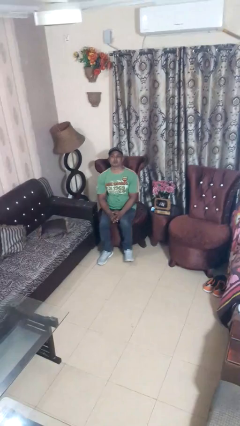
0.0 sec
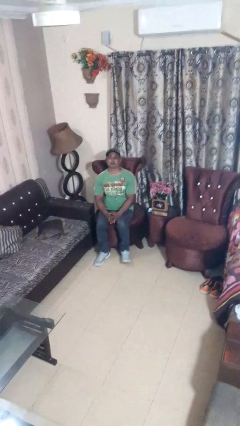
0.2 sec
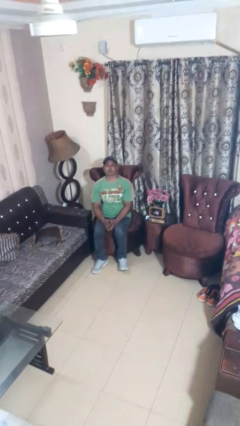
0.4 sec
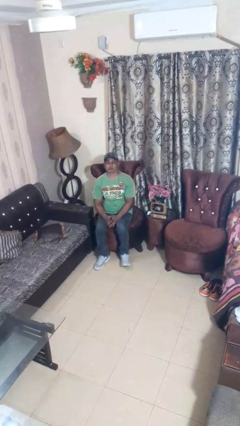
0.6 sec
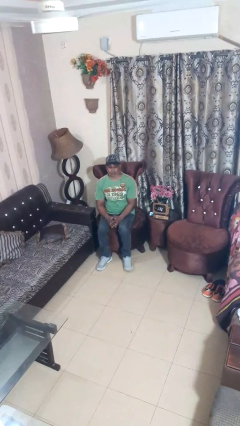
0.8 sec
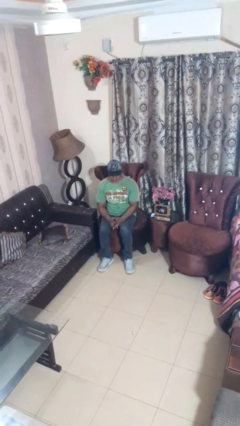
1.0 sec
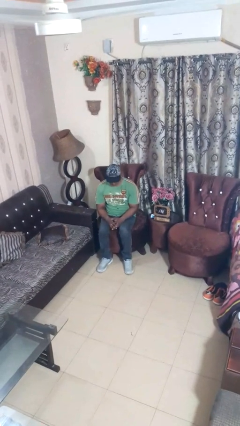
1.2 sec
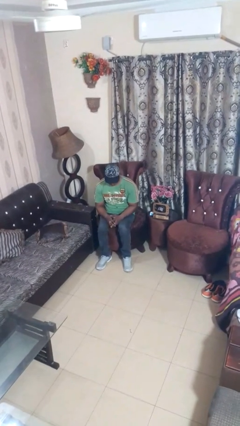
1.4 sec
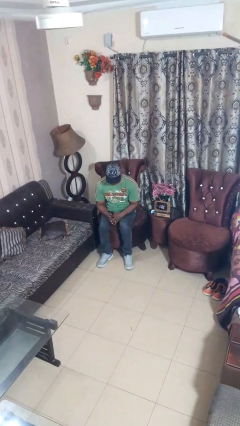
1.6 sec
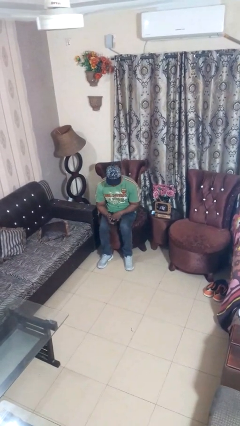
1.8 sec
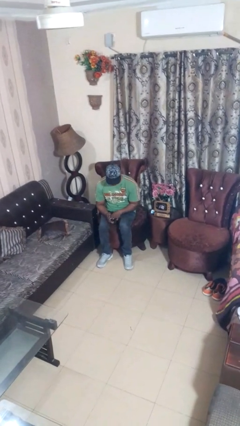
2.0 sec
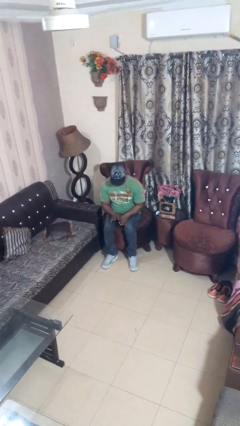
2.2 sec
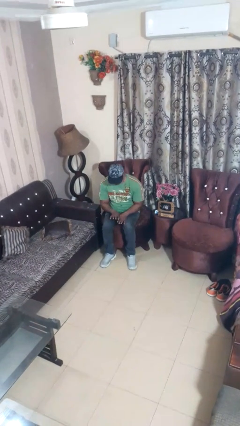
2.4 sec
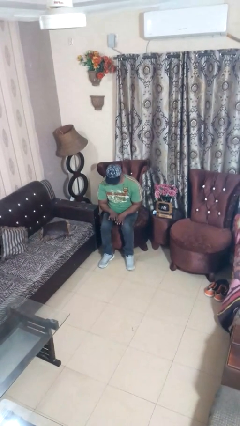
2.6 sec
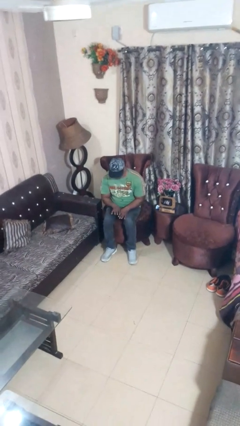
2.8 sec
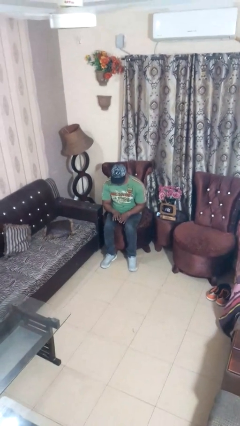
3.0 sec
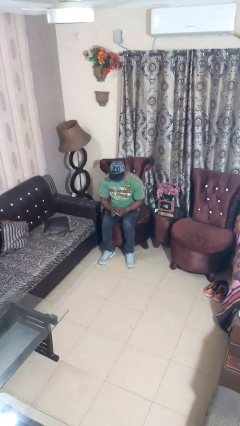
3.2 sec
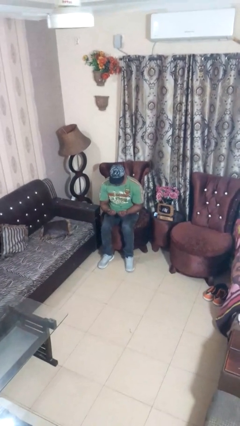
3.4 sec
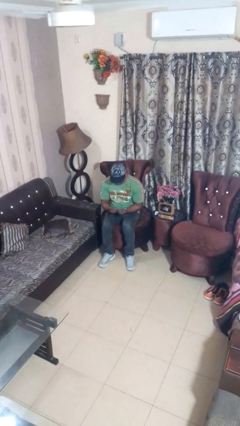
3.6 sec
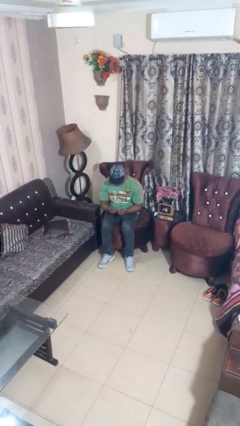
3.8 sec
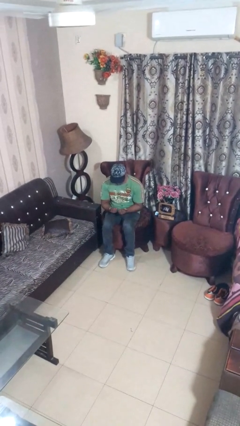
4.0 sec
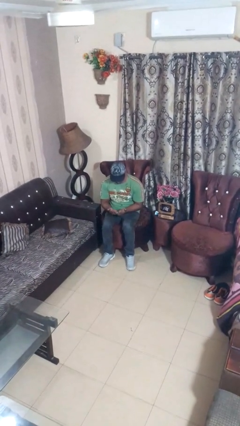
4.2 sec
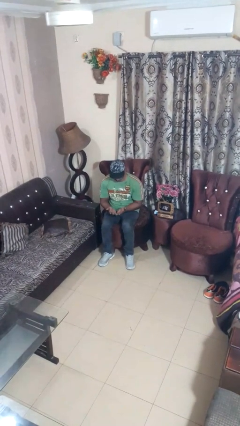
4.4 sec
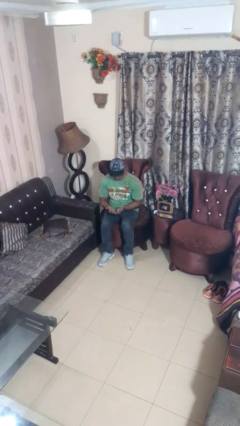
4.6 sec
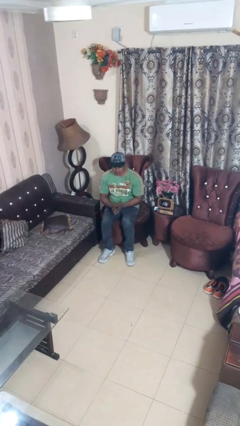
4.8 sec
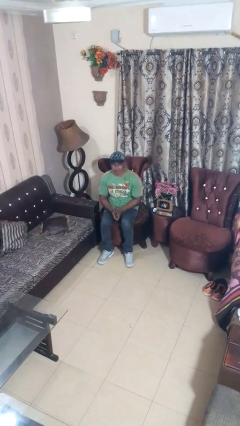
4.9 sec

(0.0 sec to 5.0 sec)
person looks at hands in lap

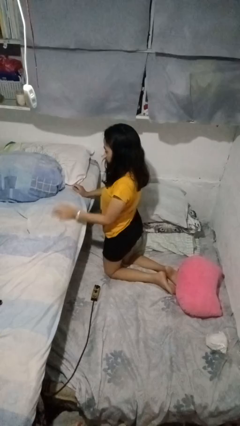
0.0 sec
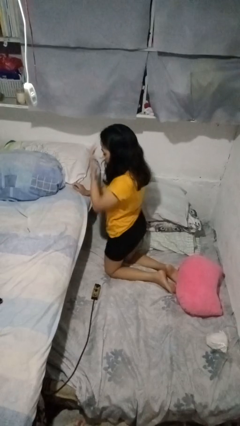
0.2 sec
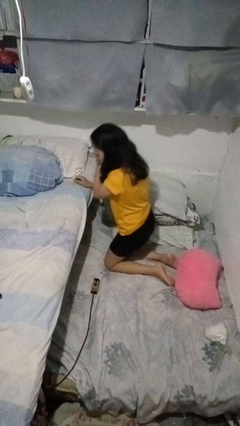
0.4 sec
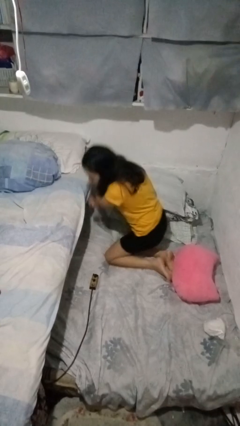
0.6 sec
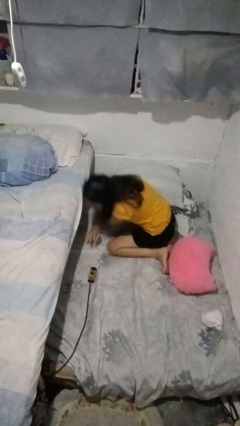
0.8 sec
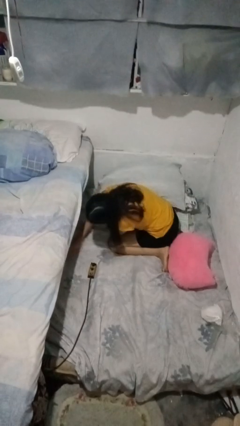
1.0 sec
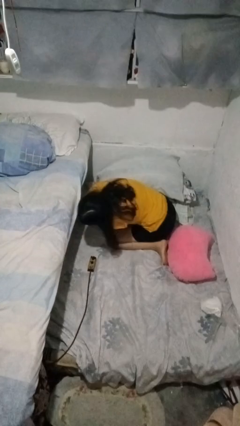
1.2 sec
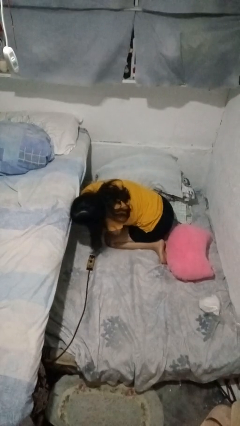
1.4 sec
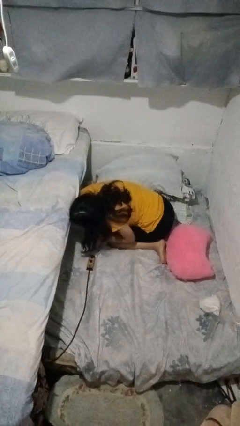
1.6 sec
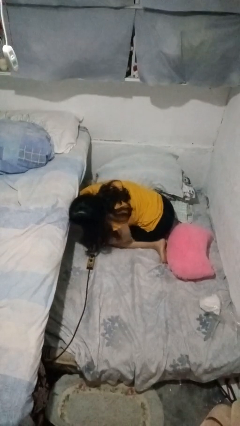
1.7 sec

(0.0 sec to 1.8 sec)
person searches under bed

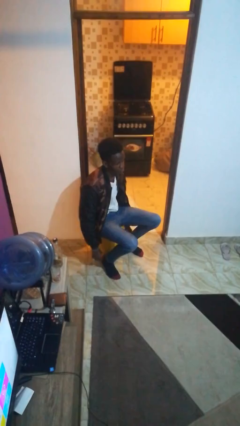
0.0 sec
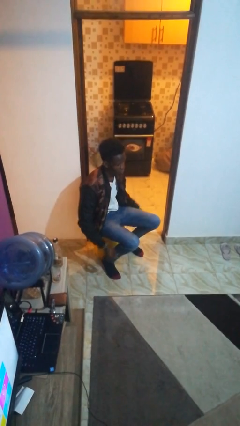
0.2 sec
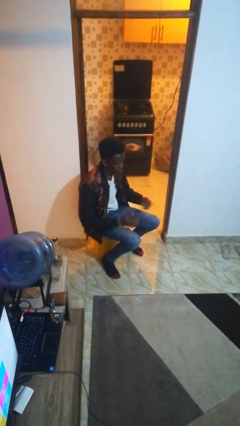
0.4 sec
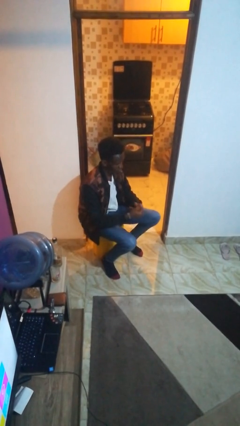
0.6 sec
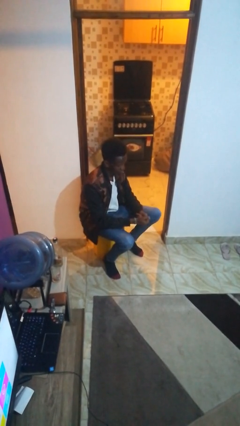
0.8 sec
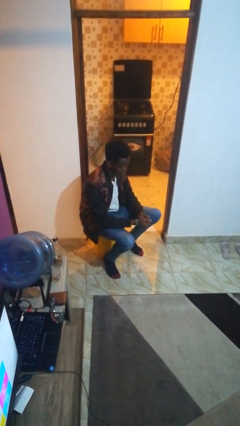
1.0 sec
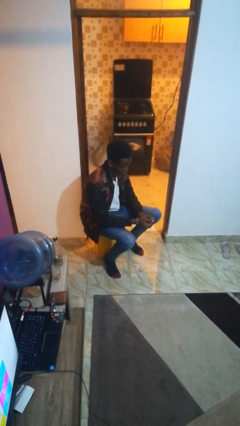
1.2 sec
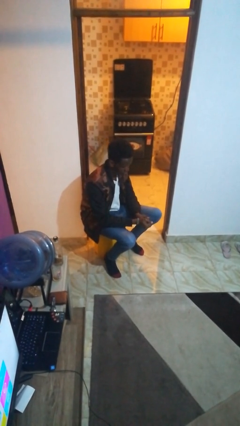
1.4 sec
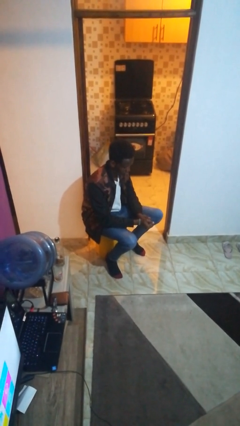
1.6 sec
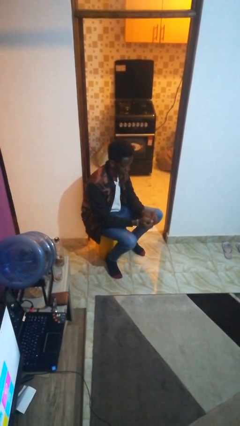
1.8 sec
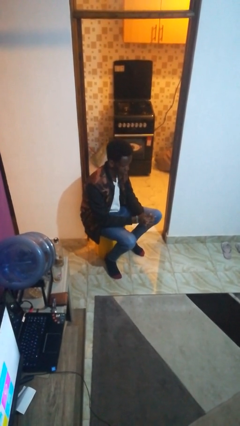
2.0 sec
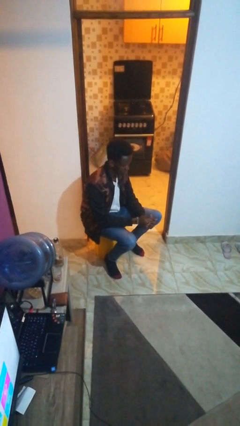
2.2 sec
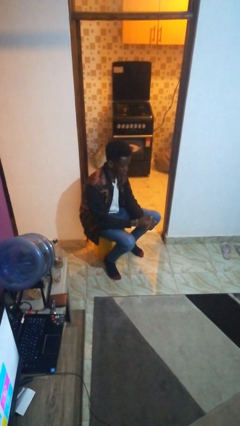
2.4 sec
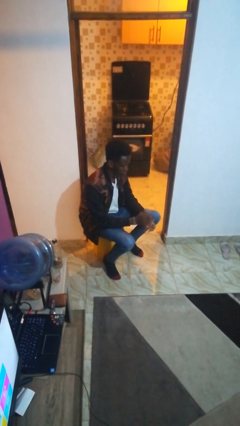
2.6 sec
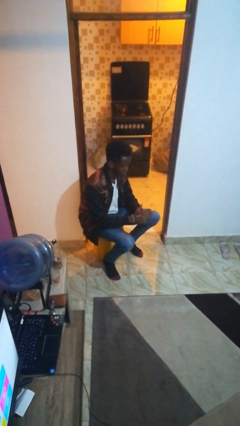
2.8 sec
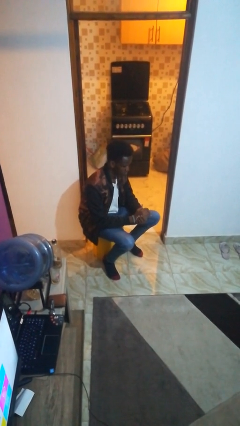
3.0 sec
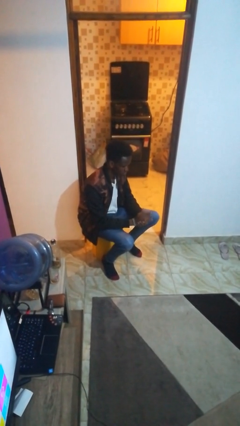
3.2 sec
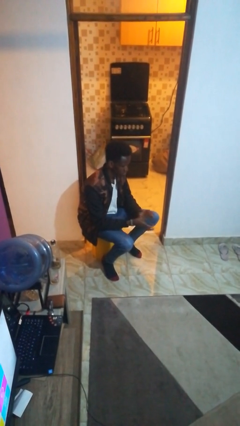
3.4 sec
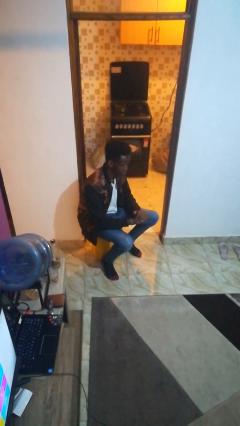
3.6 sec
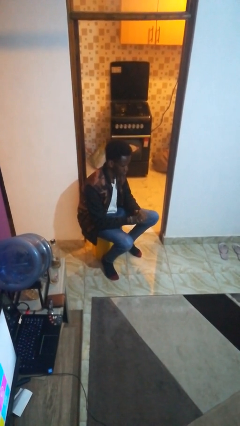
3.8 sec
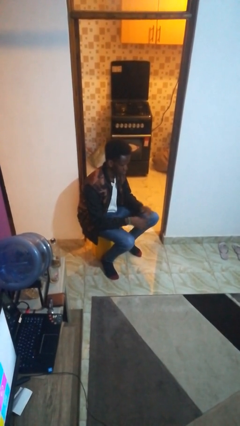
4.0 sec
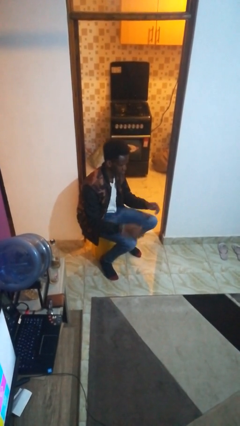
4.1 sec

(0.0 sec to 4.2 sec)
person cracks knuckles

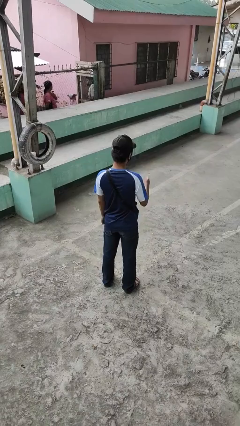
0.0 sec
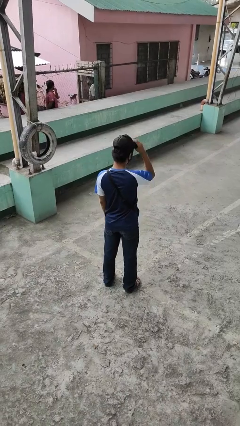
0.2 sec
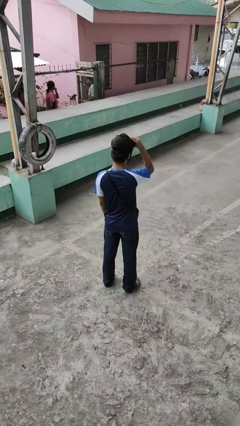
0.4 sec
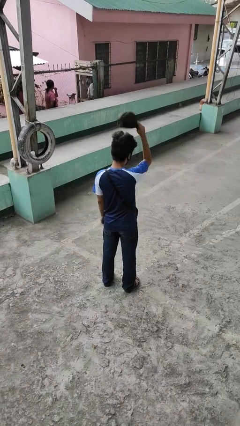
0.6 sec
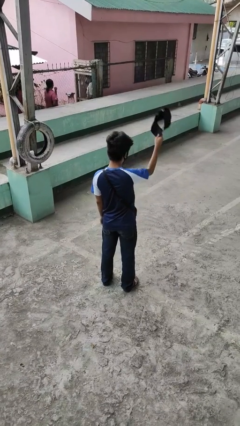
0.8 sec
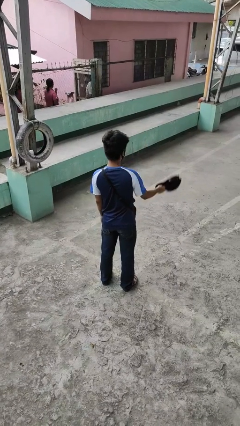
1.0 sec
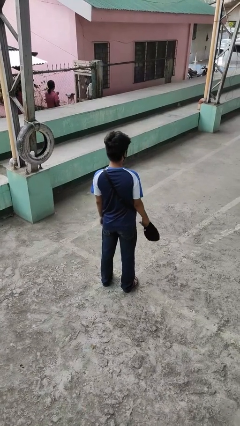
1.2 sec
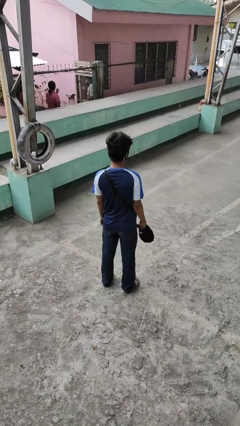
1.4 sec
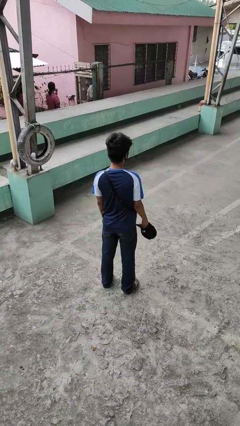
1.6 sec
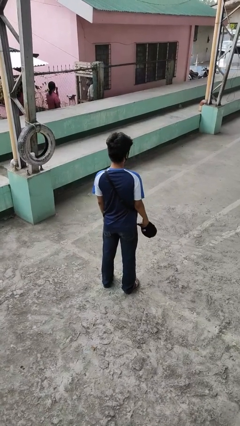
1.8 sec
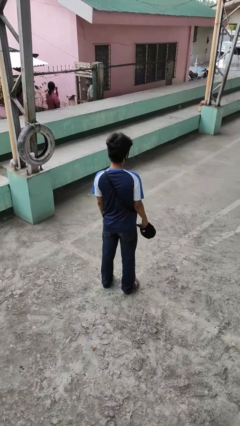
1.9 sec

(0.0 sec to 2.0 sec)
person takes off hat

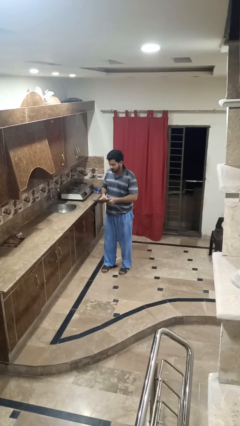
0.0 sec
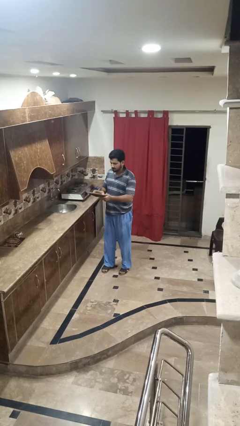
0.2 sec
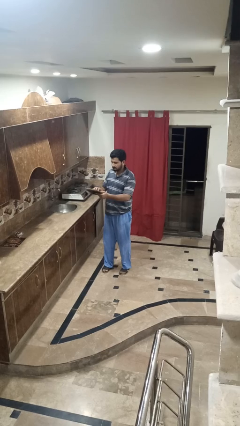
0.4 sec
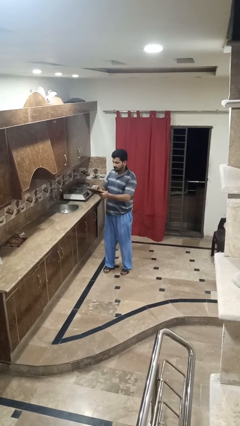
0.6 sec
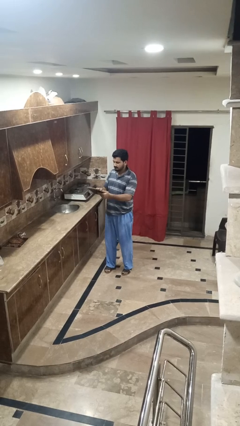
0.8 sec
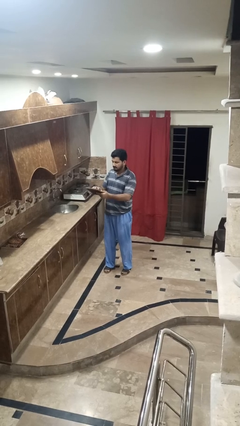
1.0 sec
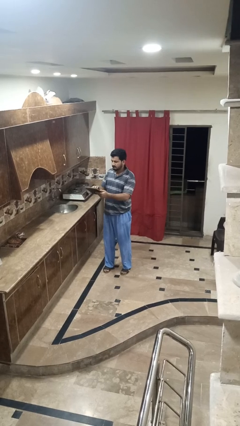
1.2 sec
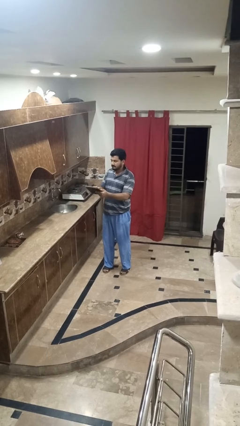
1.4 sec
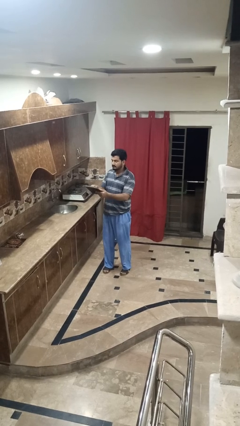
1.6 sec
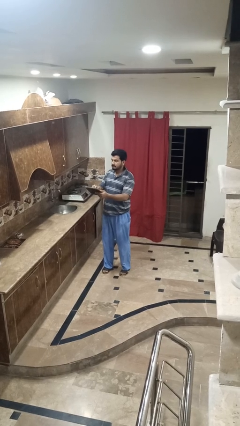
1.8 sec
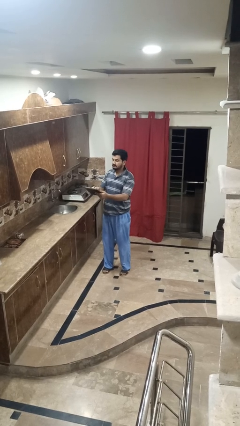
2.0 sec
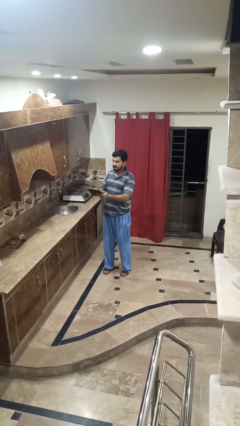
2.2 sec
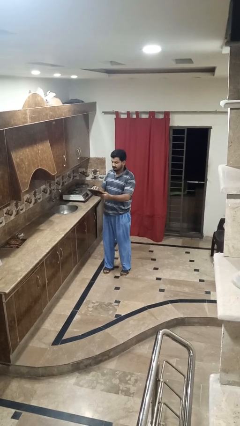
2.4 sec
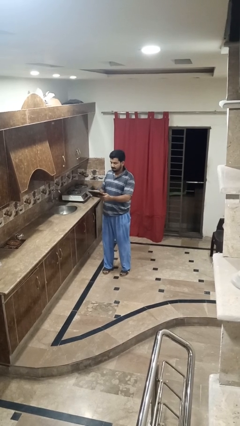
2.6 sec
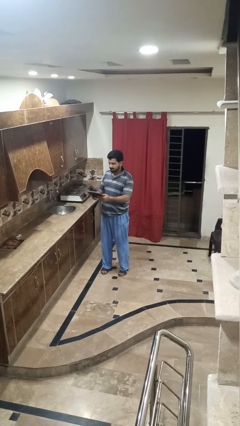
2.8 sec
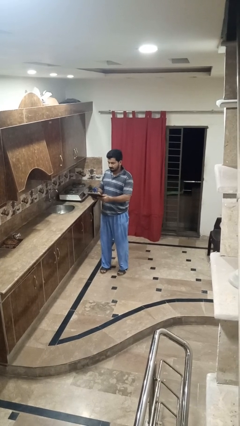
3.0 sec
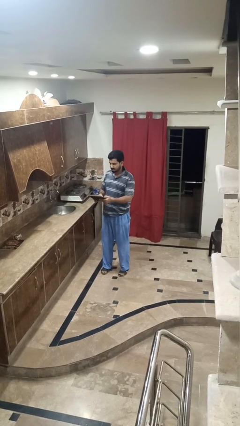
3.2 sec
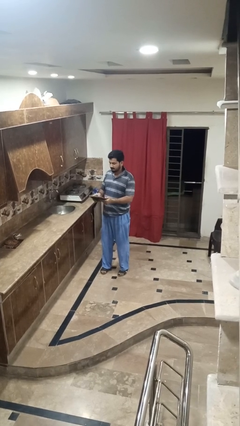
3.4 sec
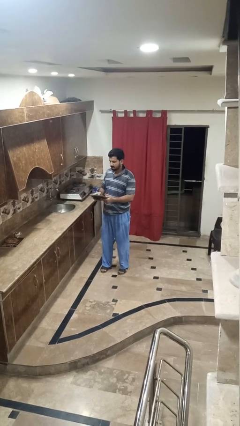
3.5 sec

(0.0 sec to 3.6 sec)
person interacts with tablet

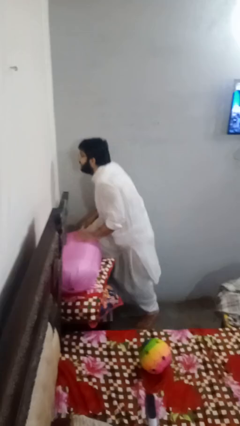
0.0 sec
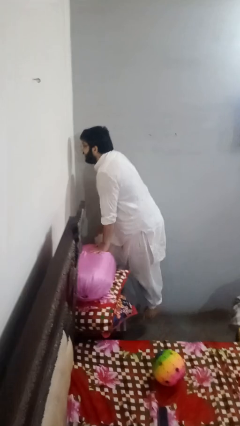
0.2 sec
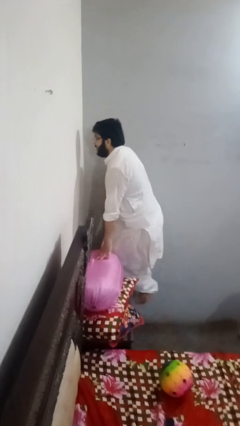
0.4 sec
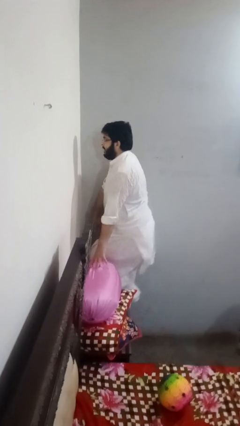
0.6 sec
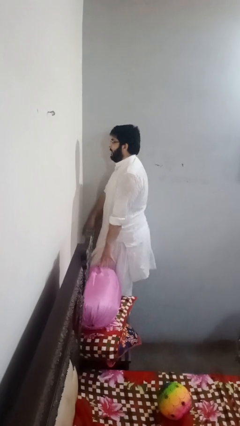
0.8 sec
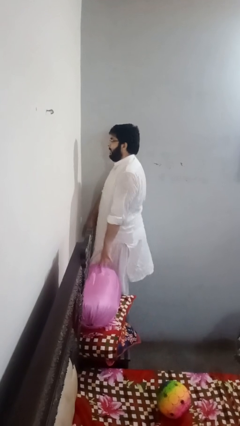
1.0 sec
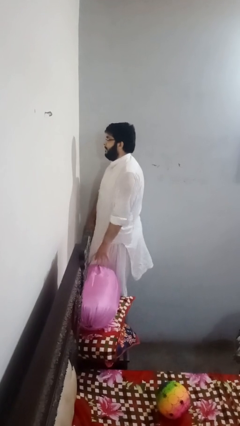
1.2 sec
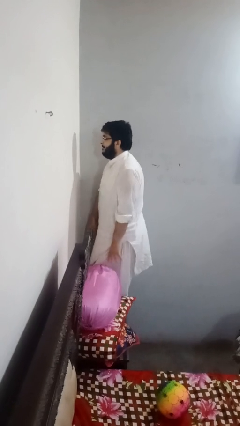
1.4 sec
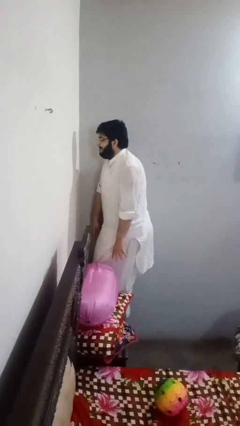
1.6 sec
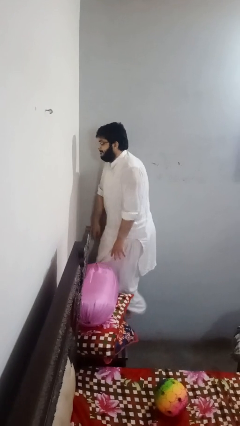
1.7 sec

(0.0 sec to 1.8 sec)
person climbs on table
